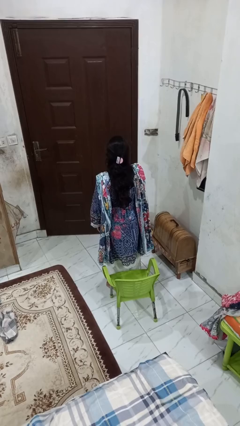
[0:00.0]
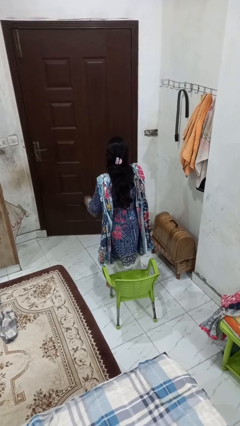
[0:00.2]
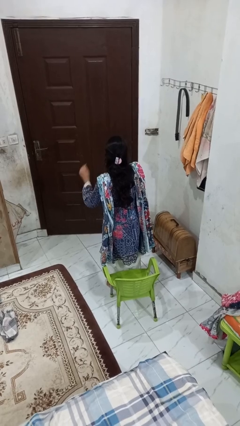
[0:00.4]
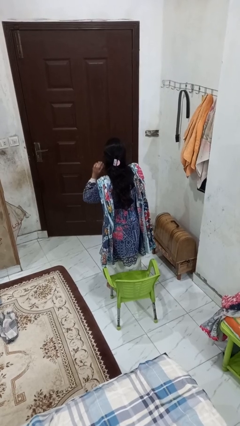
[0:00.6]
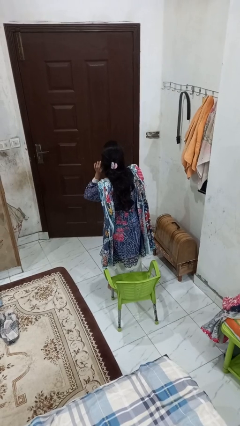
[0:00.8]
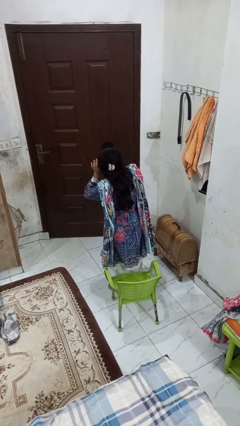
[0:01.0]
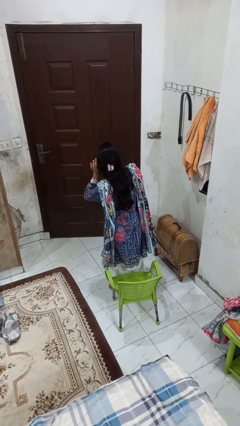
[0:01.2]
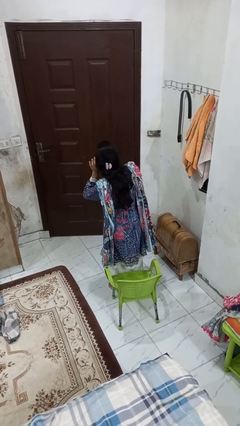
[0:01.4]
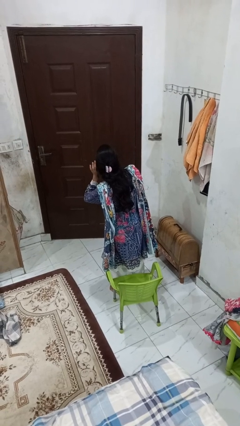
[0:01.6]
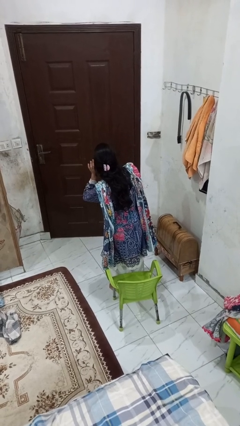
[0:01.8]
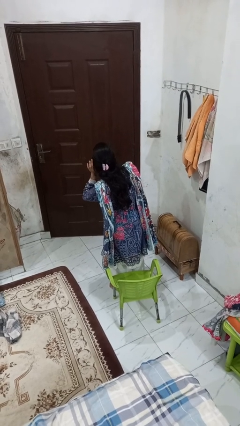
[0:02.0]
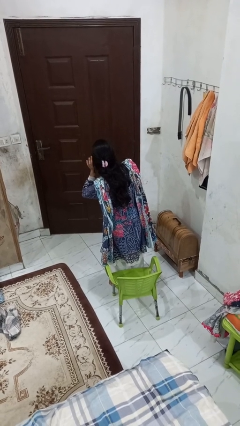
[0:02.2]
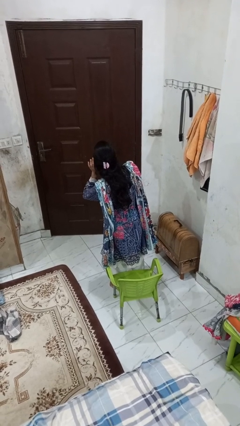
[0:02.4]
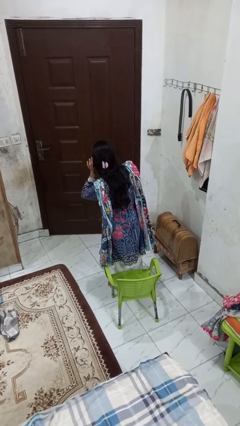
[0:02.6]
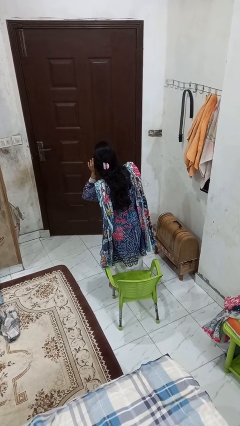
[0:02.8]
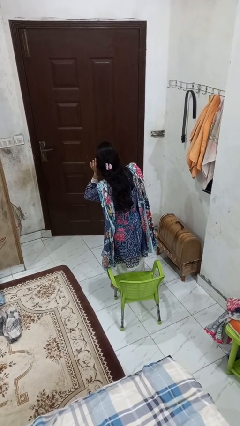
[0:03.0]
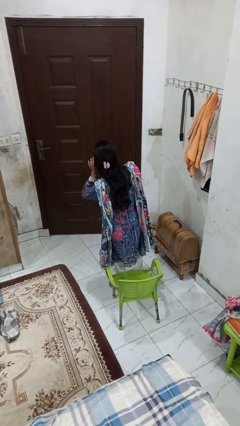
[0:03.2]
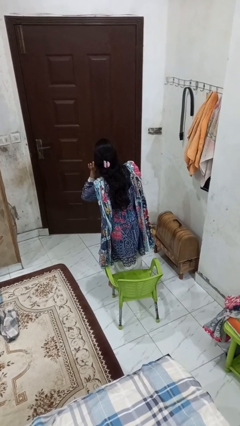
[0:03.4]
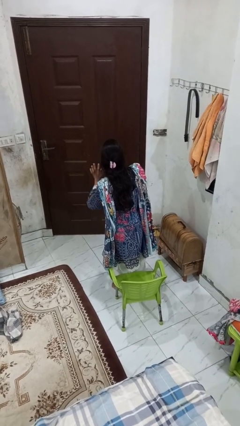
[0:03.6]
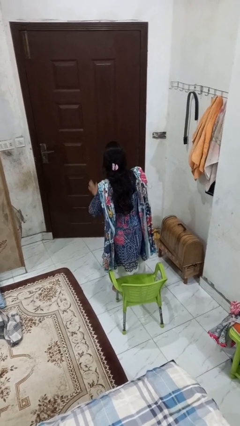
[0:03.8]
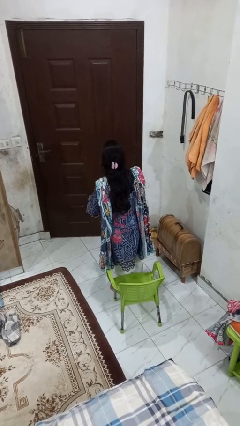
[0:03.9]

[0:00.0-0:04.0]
person gestures listen closely

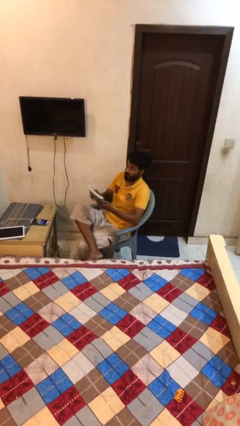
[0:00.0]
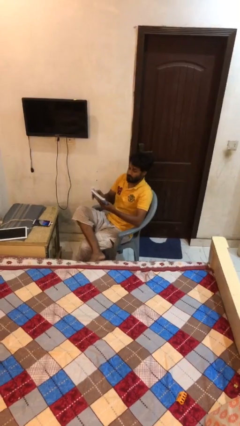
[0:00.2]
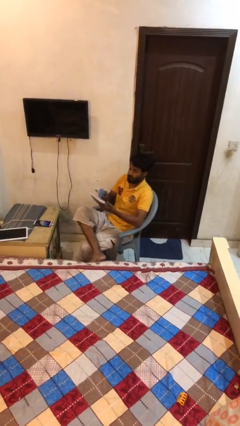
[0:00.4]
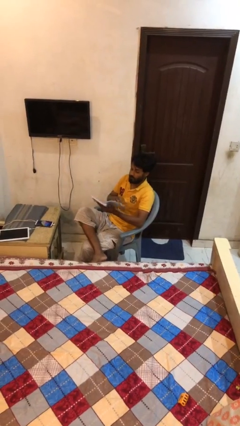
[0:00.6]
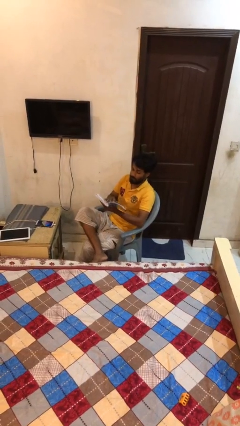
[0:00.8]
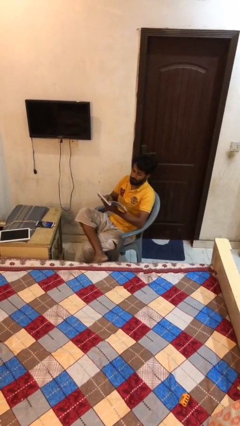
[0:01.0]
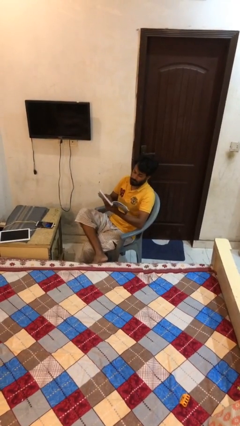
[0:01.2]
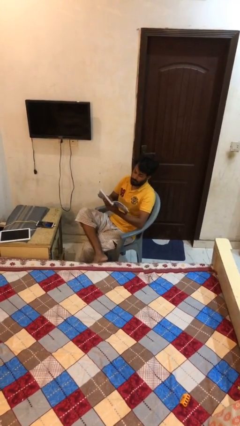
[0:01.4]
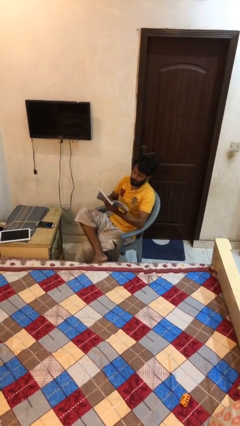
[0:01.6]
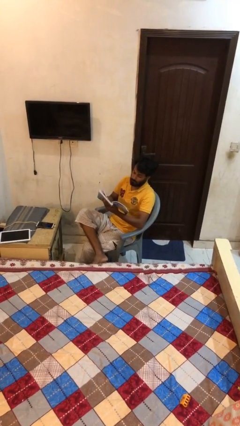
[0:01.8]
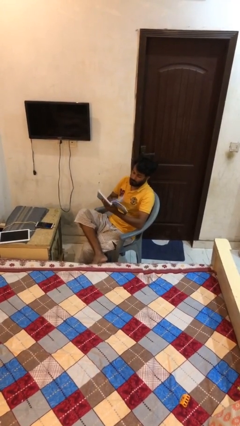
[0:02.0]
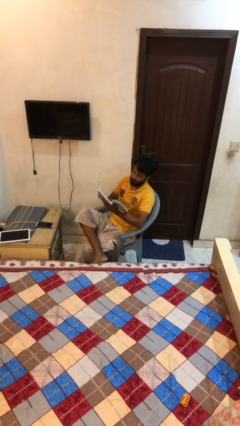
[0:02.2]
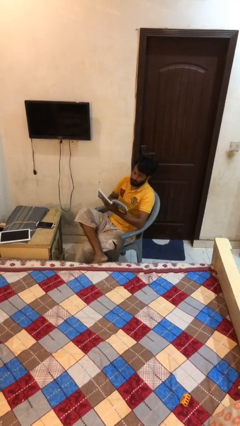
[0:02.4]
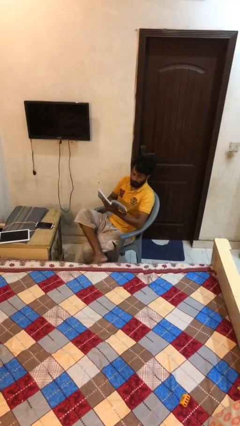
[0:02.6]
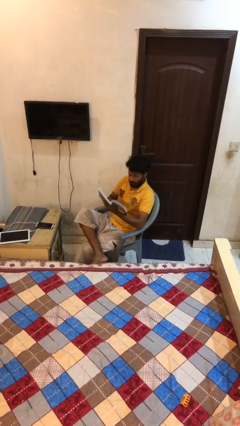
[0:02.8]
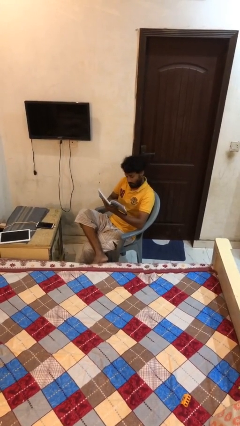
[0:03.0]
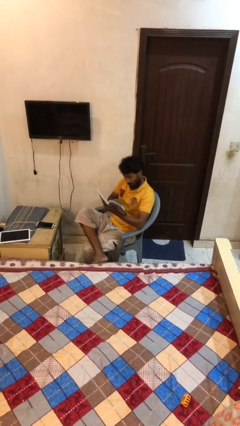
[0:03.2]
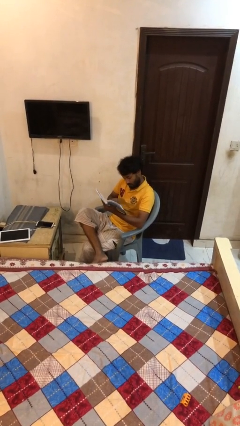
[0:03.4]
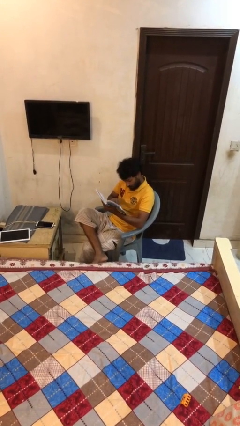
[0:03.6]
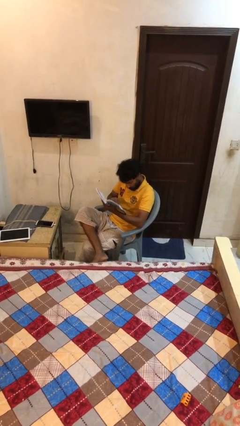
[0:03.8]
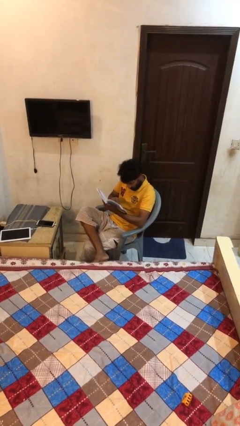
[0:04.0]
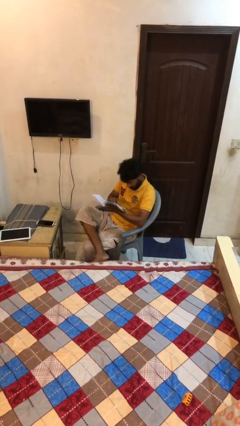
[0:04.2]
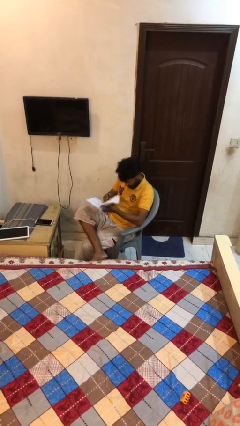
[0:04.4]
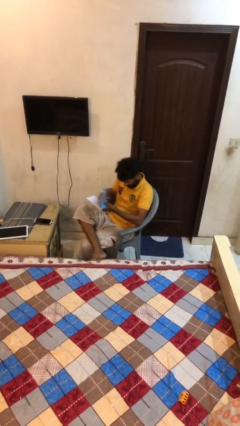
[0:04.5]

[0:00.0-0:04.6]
person reads document

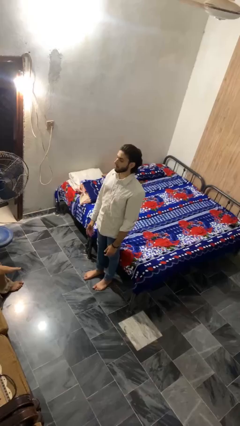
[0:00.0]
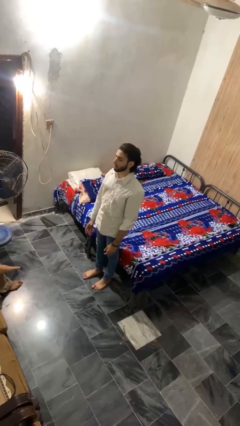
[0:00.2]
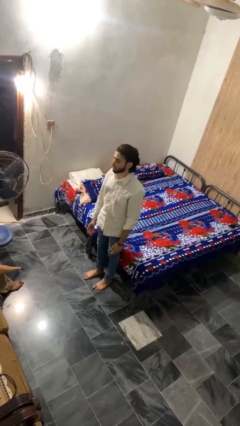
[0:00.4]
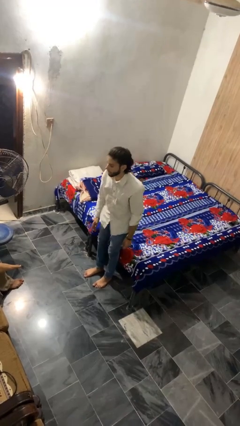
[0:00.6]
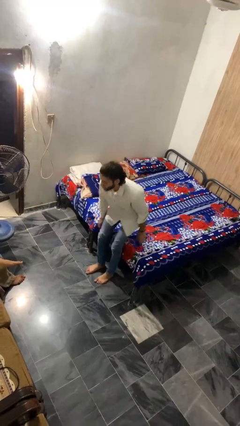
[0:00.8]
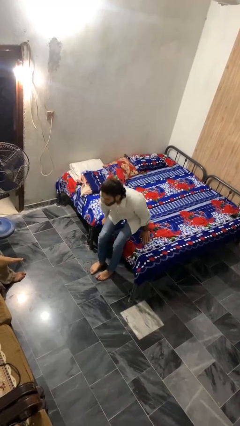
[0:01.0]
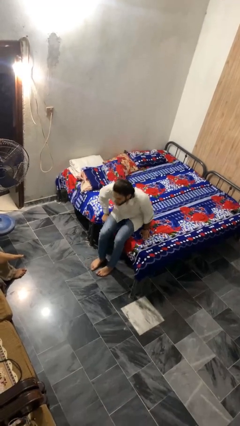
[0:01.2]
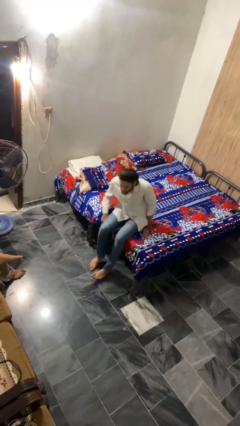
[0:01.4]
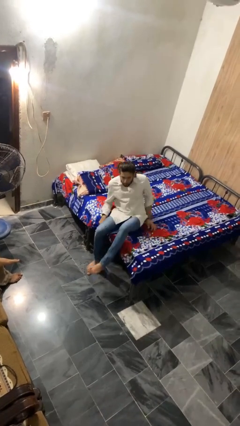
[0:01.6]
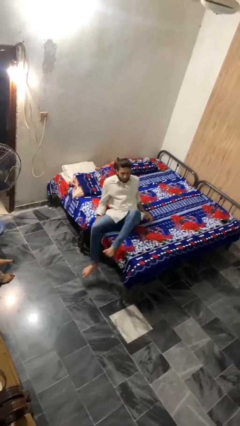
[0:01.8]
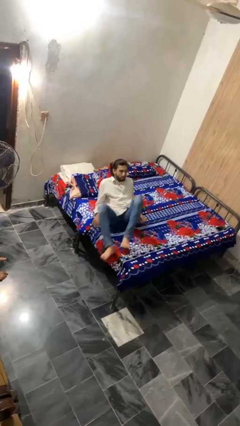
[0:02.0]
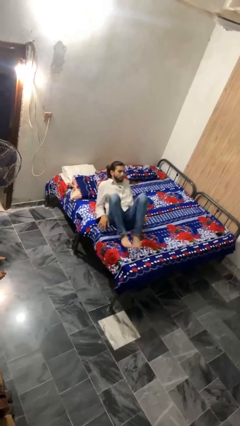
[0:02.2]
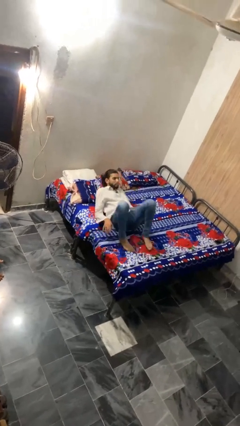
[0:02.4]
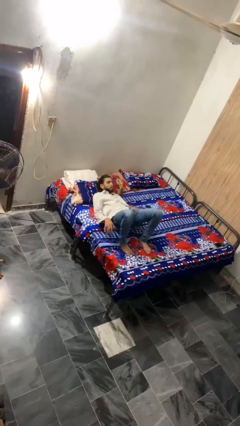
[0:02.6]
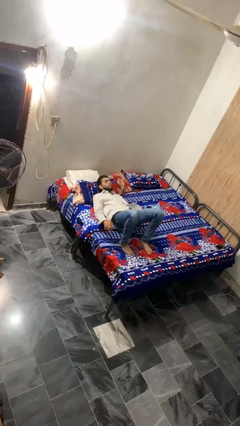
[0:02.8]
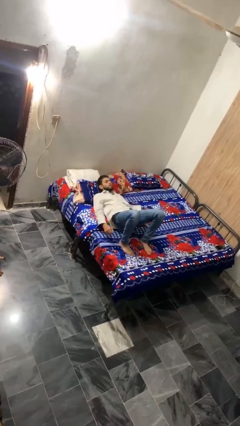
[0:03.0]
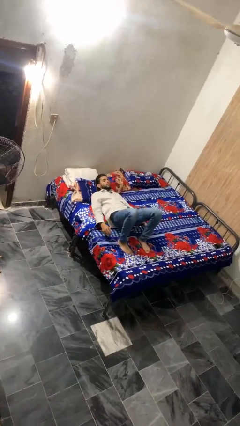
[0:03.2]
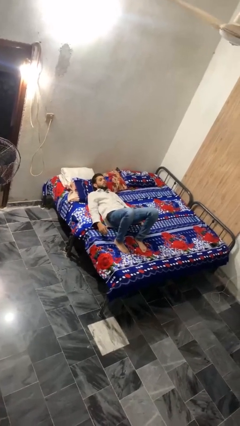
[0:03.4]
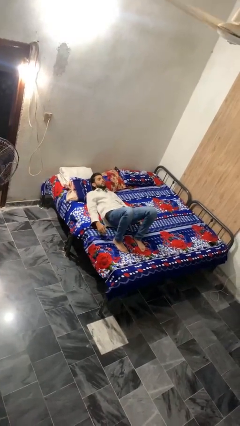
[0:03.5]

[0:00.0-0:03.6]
person lies down on bed

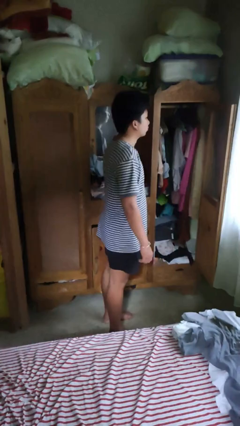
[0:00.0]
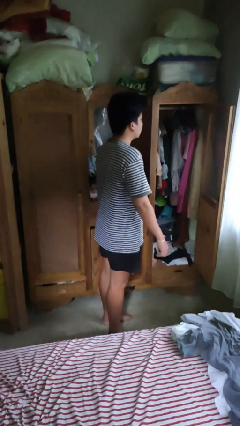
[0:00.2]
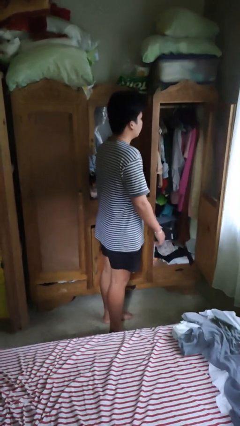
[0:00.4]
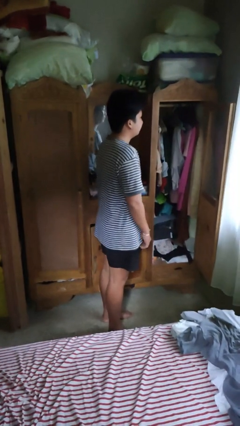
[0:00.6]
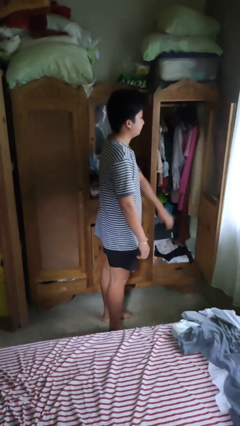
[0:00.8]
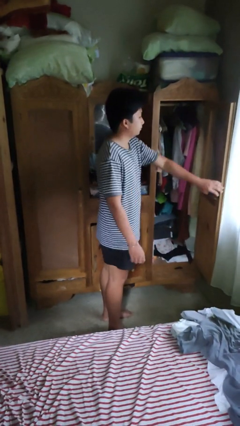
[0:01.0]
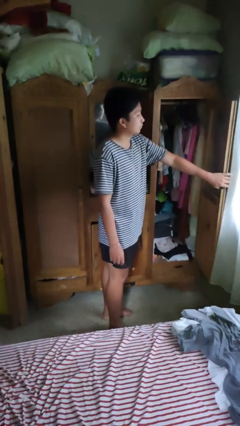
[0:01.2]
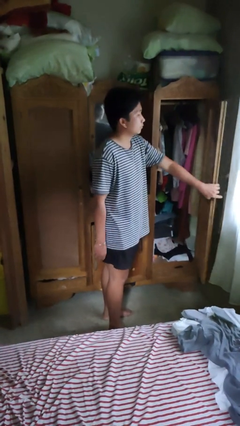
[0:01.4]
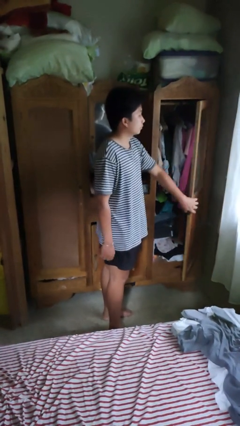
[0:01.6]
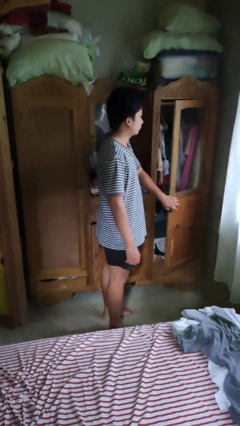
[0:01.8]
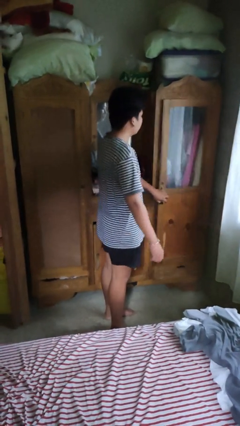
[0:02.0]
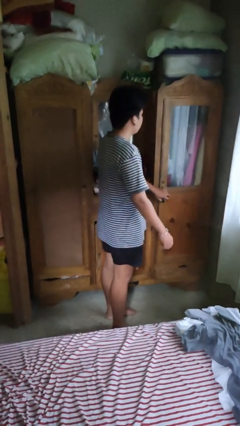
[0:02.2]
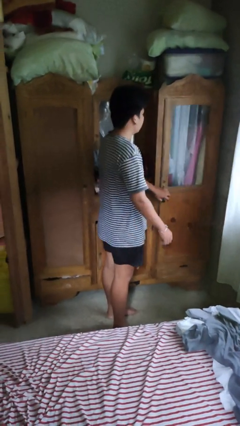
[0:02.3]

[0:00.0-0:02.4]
person closes closet door

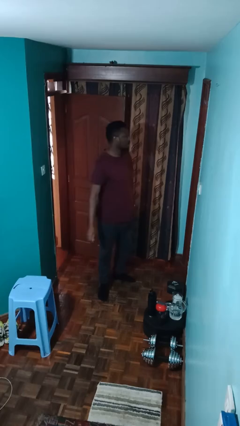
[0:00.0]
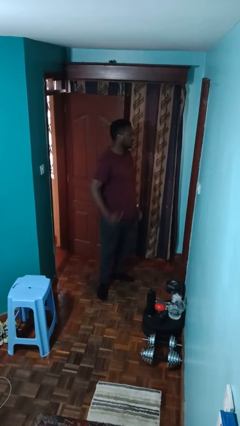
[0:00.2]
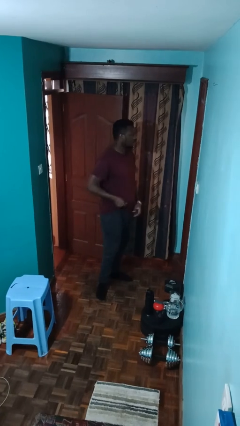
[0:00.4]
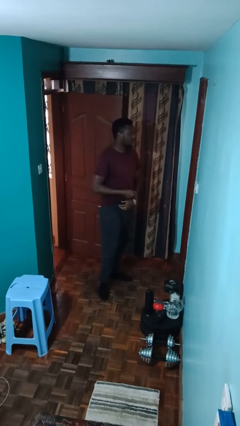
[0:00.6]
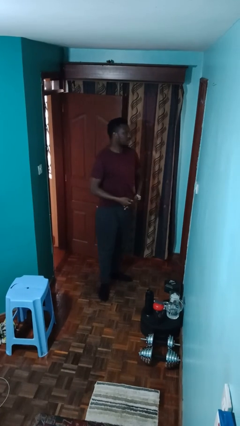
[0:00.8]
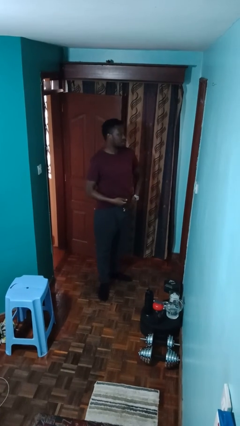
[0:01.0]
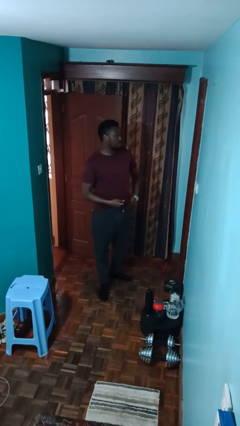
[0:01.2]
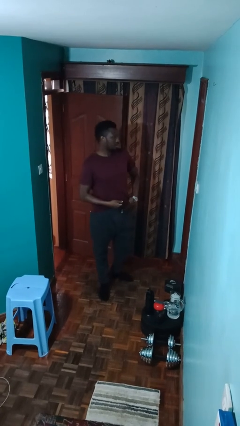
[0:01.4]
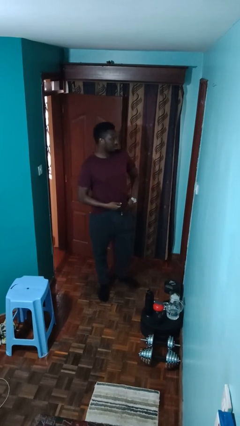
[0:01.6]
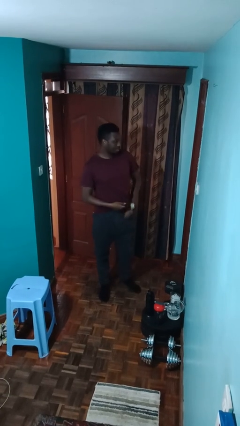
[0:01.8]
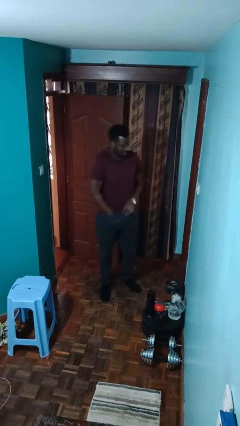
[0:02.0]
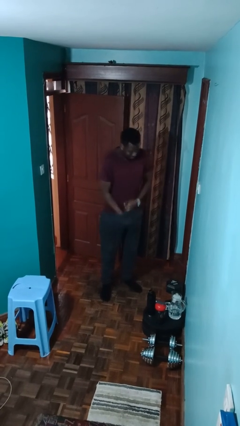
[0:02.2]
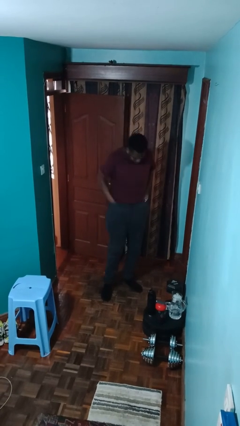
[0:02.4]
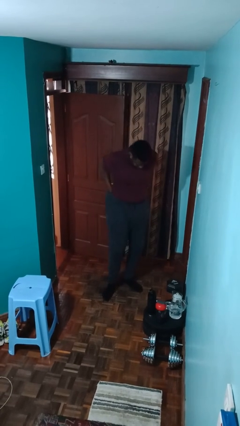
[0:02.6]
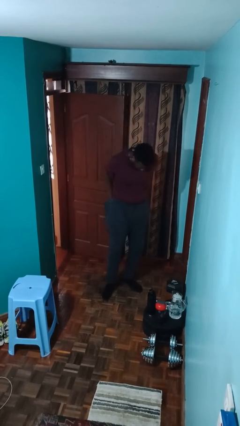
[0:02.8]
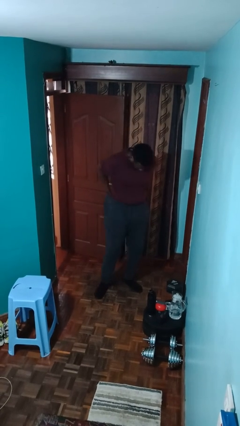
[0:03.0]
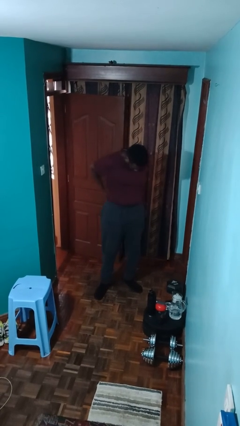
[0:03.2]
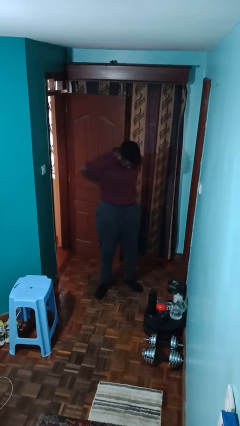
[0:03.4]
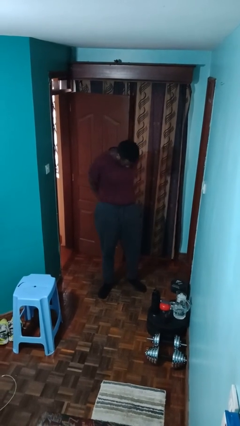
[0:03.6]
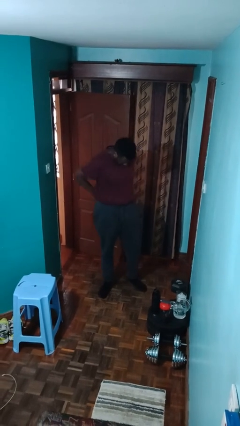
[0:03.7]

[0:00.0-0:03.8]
person tucks in shirt
